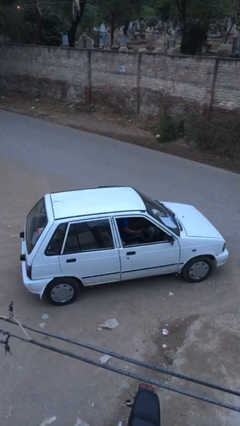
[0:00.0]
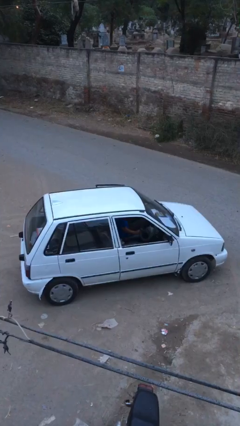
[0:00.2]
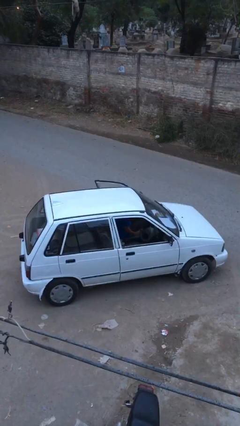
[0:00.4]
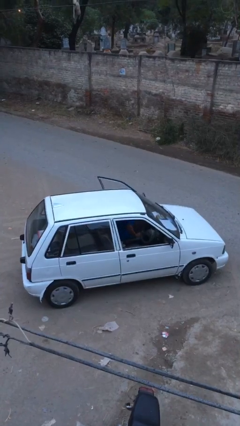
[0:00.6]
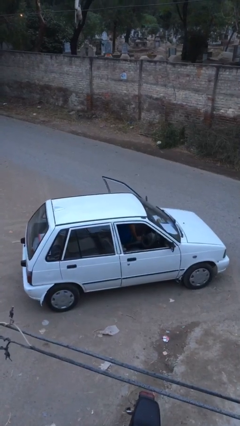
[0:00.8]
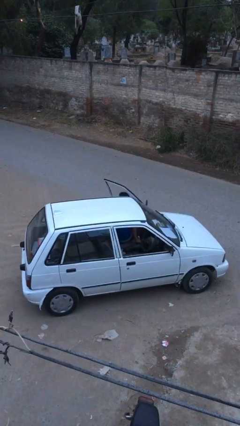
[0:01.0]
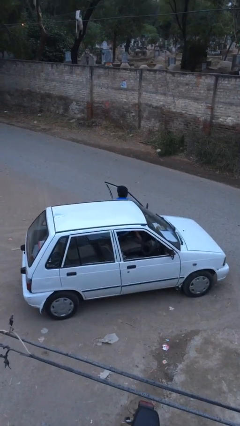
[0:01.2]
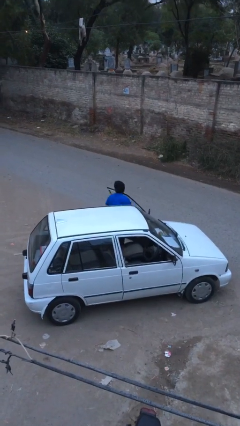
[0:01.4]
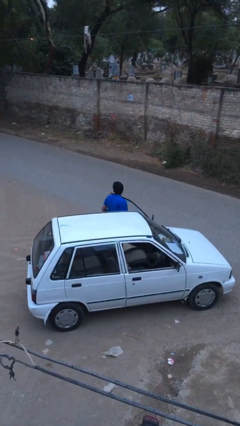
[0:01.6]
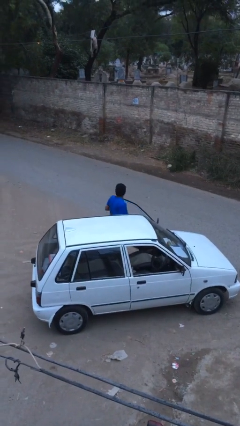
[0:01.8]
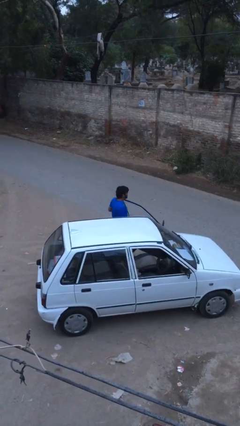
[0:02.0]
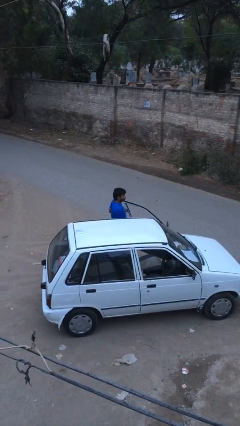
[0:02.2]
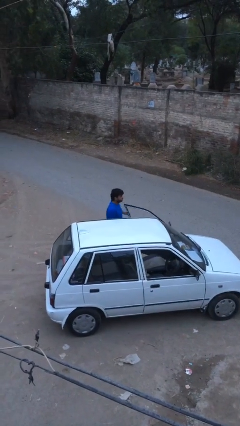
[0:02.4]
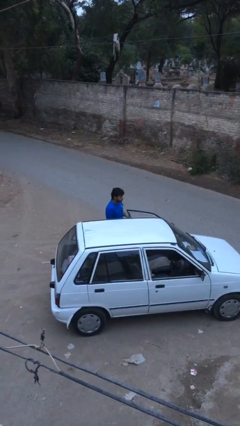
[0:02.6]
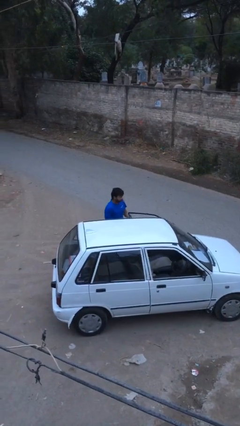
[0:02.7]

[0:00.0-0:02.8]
person exits car

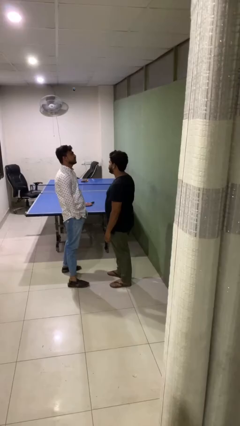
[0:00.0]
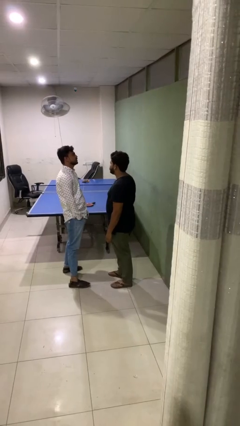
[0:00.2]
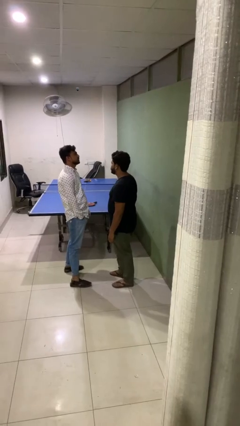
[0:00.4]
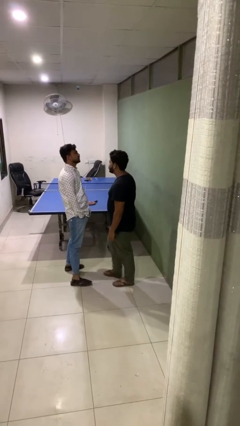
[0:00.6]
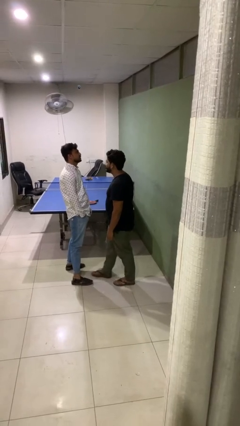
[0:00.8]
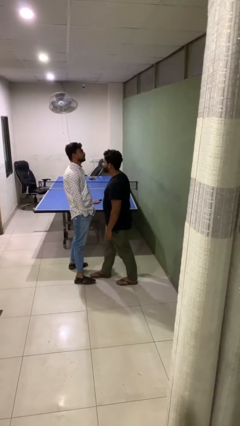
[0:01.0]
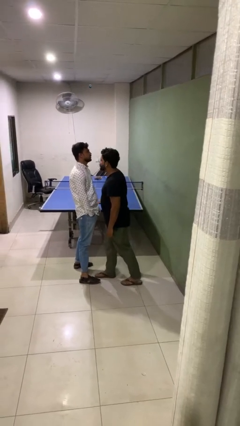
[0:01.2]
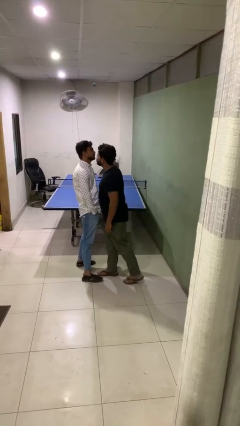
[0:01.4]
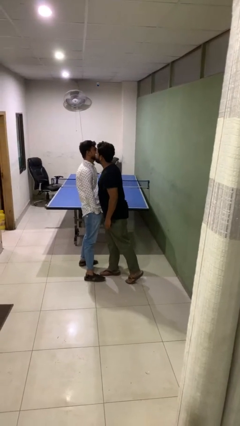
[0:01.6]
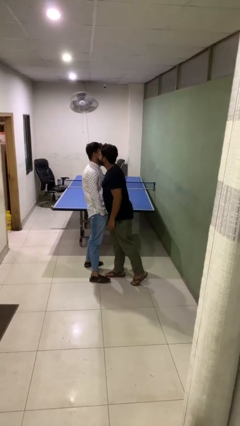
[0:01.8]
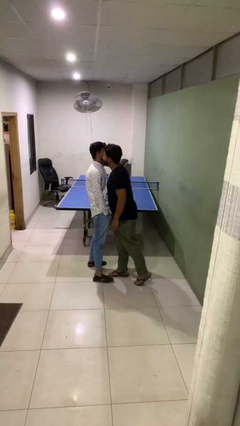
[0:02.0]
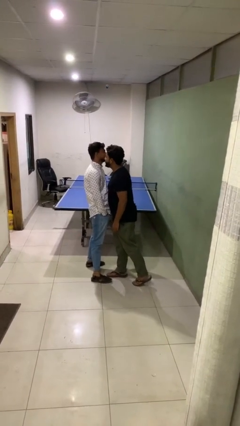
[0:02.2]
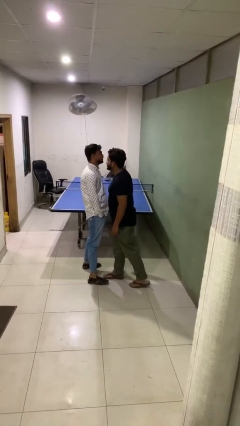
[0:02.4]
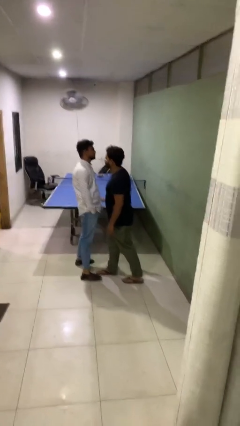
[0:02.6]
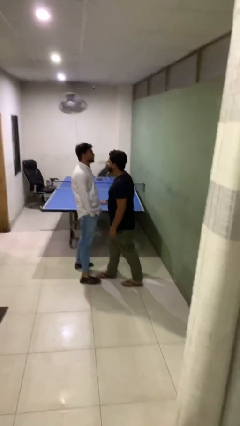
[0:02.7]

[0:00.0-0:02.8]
person kisses cheek of person

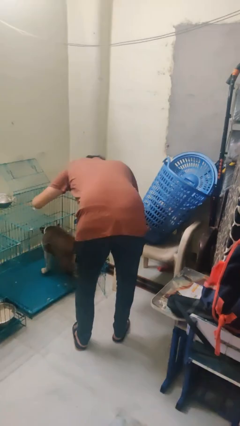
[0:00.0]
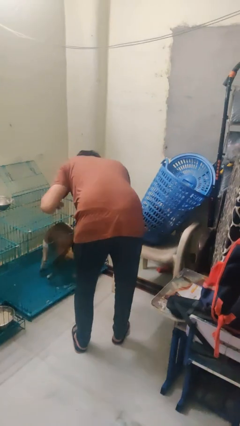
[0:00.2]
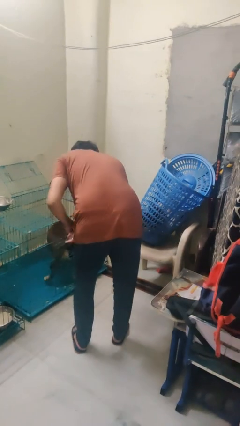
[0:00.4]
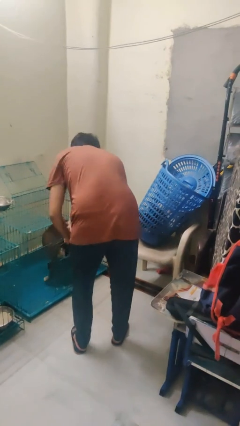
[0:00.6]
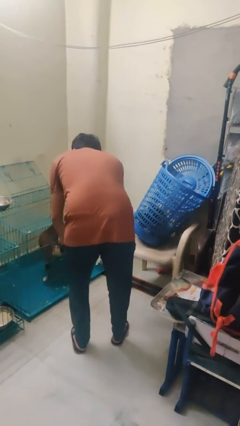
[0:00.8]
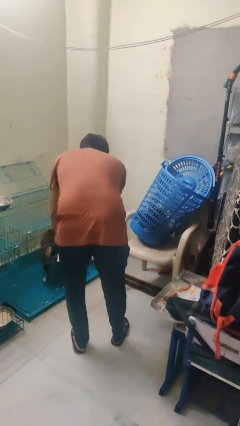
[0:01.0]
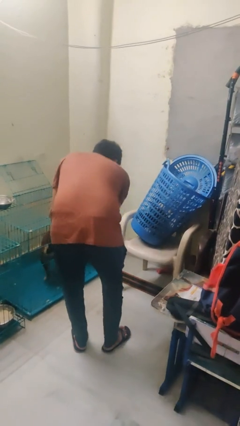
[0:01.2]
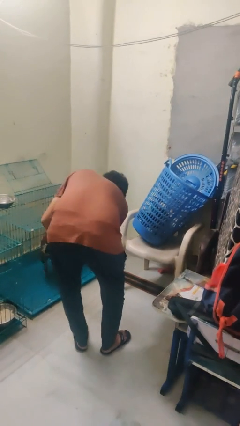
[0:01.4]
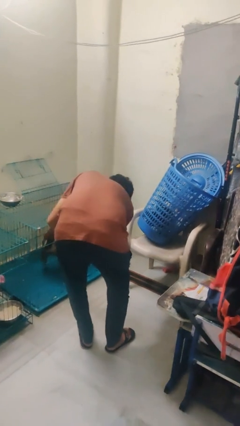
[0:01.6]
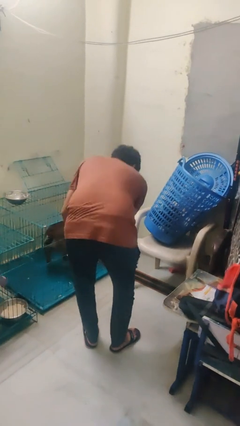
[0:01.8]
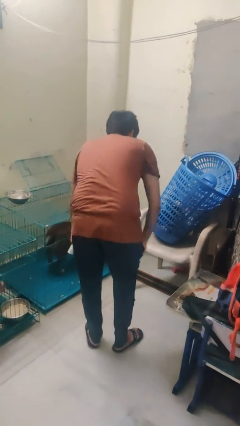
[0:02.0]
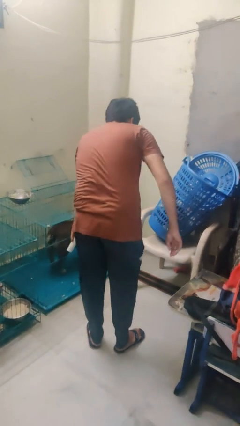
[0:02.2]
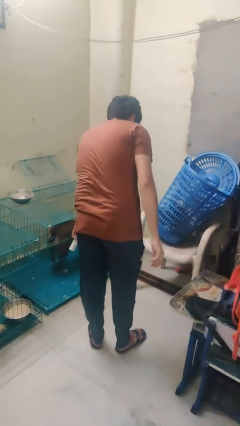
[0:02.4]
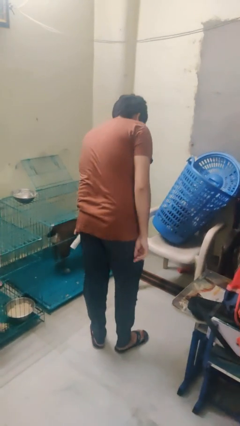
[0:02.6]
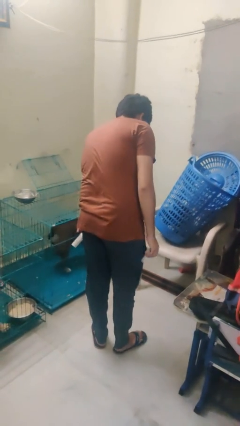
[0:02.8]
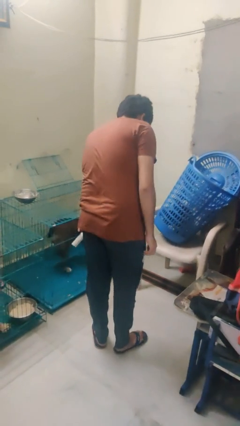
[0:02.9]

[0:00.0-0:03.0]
person crates dog

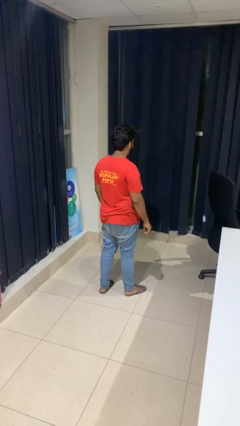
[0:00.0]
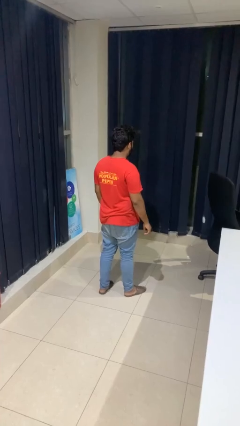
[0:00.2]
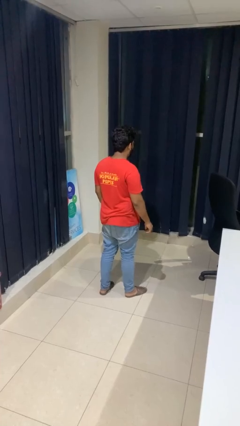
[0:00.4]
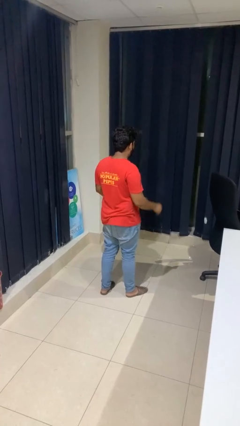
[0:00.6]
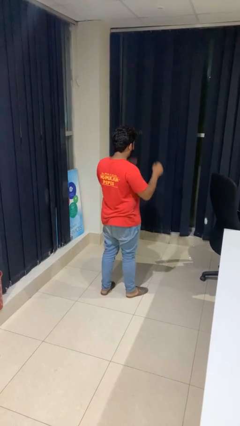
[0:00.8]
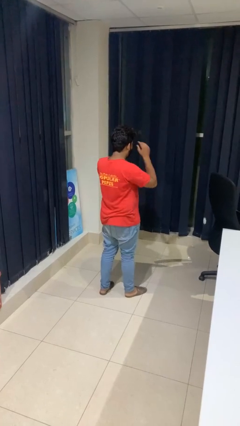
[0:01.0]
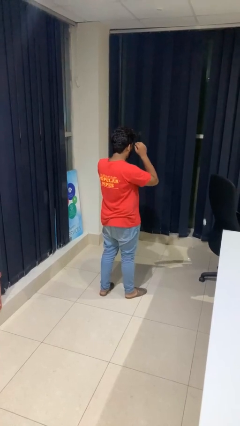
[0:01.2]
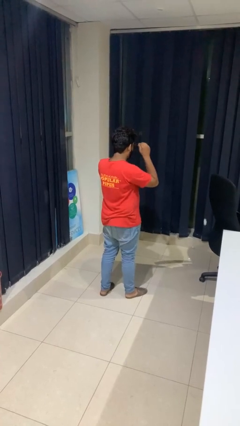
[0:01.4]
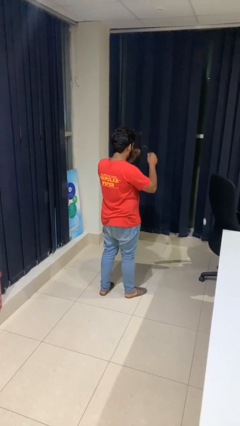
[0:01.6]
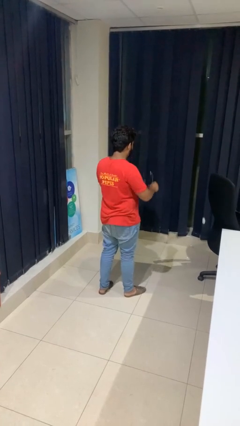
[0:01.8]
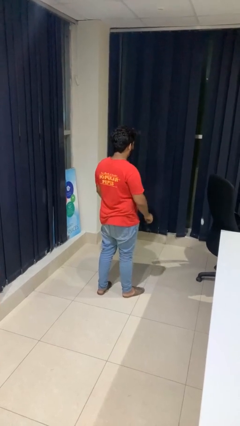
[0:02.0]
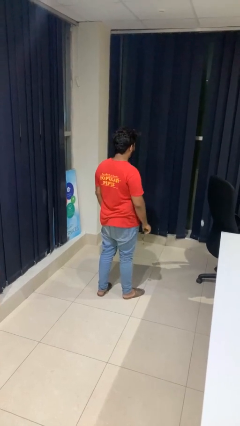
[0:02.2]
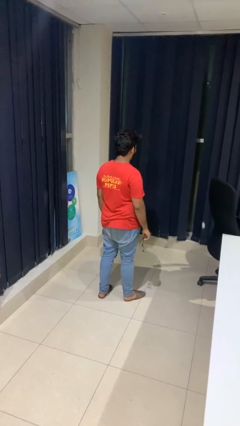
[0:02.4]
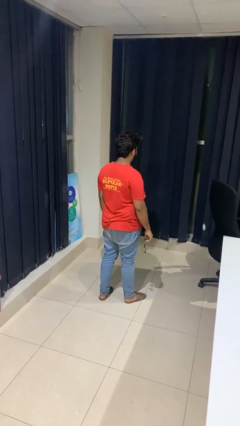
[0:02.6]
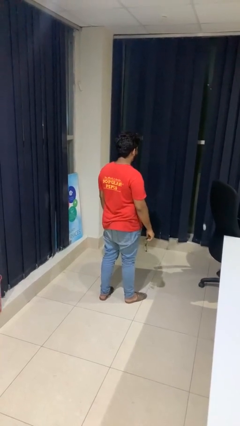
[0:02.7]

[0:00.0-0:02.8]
person takes off glasses

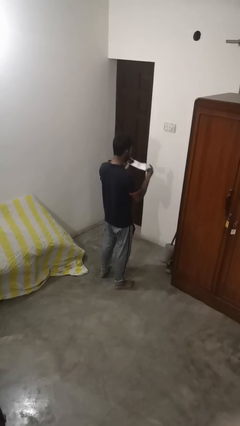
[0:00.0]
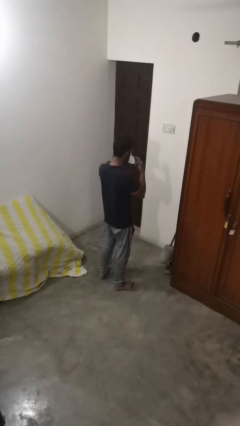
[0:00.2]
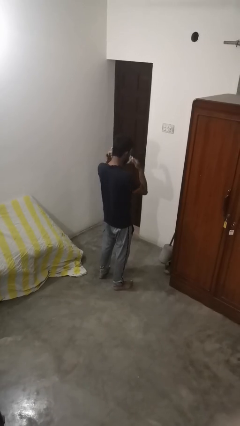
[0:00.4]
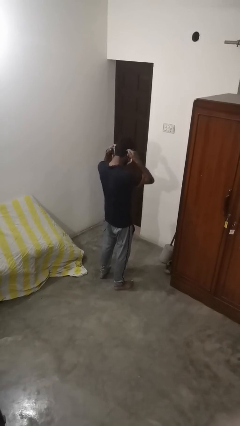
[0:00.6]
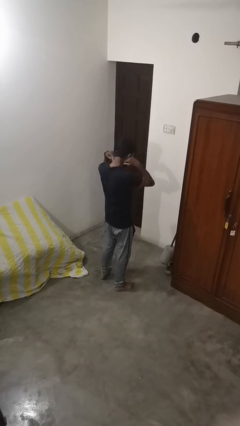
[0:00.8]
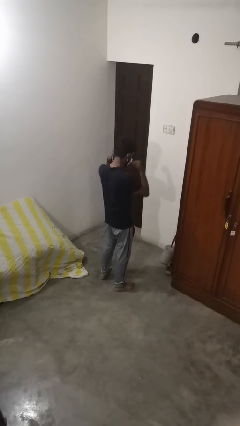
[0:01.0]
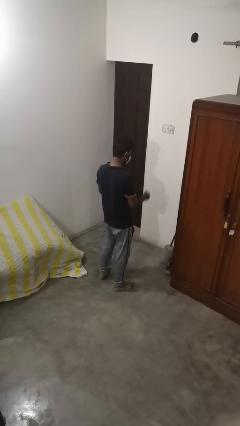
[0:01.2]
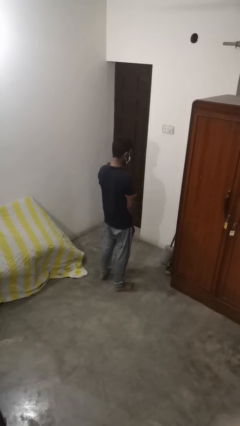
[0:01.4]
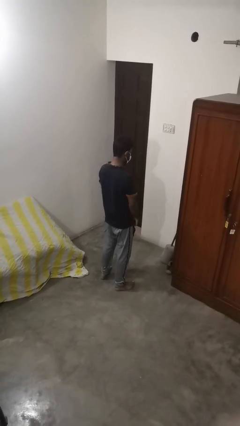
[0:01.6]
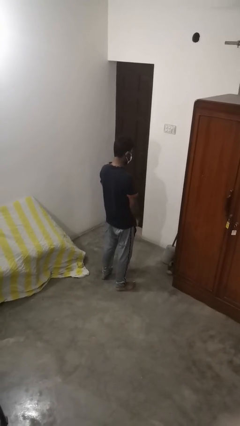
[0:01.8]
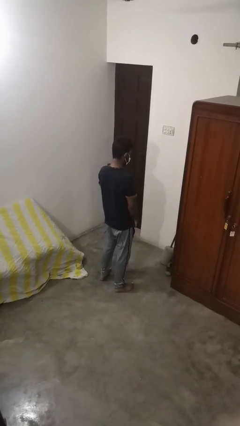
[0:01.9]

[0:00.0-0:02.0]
person puts on facemask

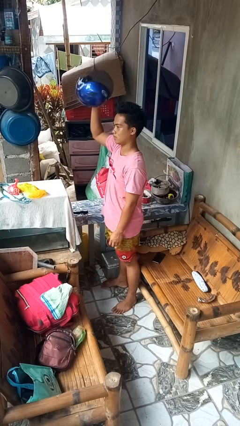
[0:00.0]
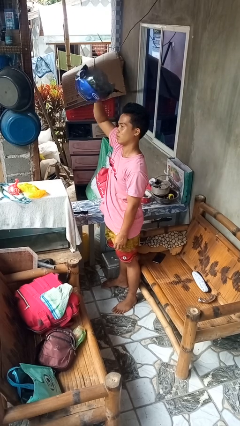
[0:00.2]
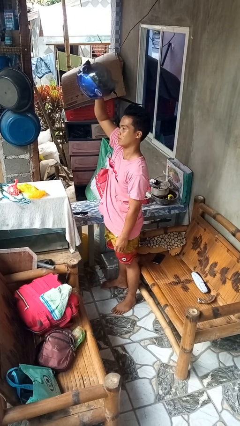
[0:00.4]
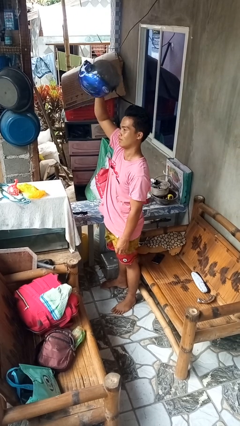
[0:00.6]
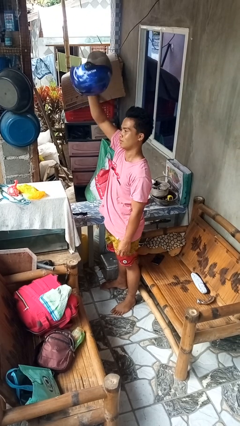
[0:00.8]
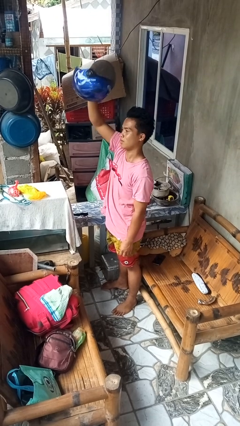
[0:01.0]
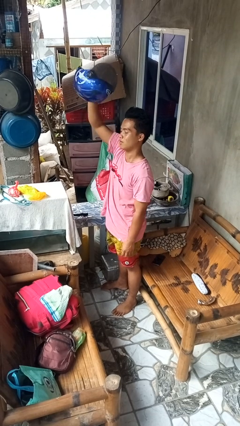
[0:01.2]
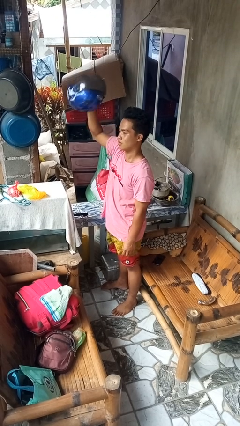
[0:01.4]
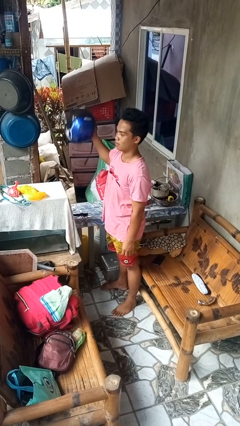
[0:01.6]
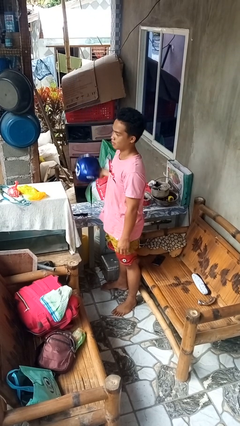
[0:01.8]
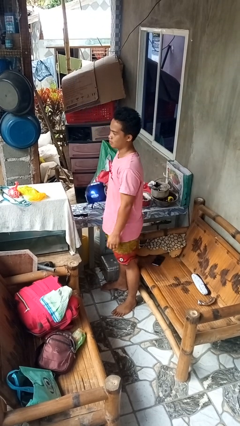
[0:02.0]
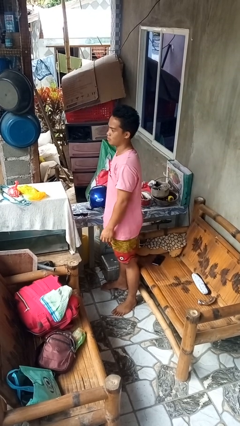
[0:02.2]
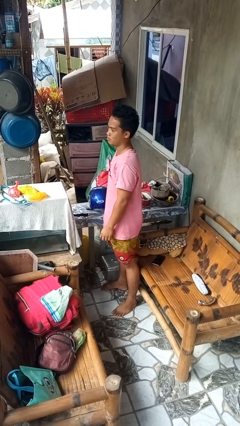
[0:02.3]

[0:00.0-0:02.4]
person holds object above head

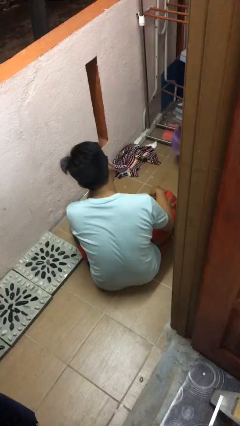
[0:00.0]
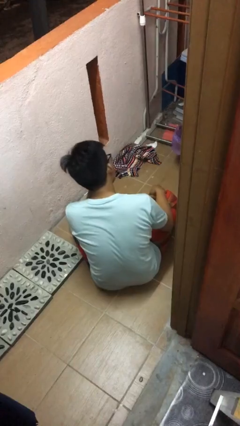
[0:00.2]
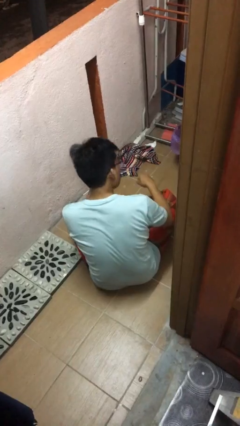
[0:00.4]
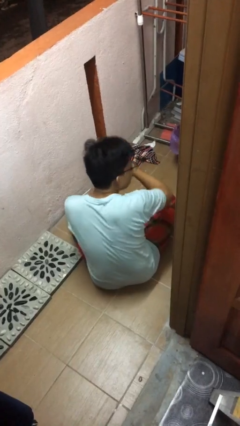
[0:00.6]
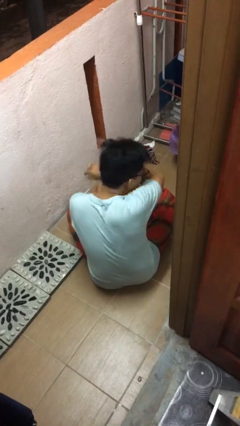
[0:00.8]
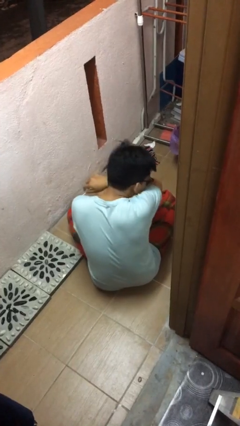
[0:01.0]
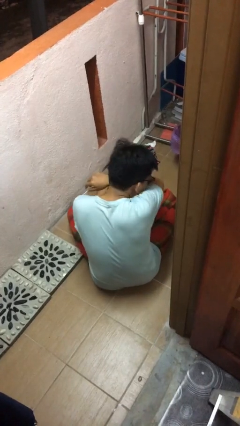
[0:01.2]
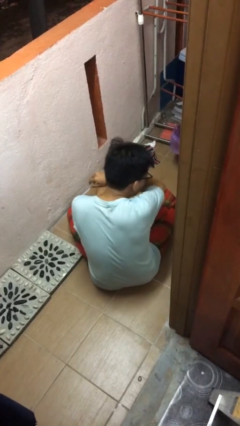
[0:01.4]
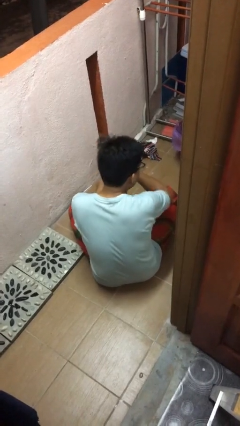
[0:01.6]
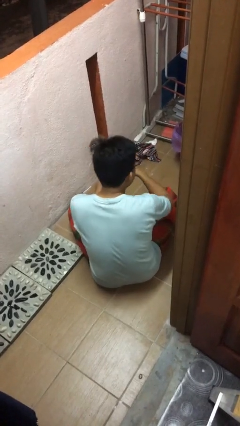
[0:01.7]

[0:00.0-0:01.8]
person sneezes into arm
